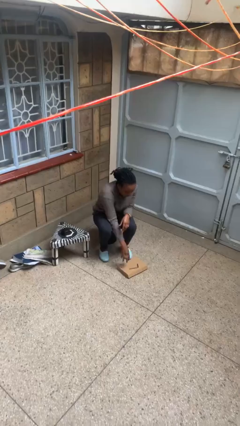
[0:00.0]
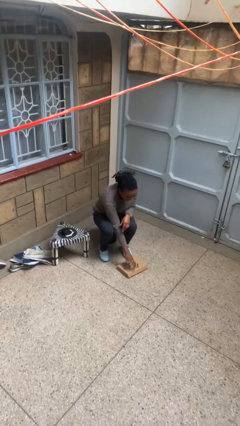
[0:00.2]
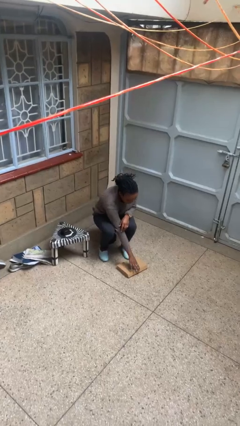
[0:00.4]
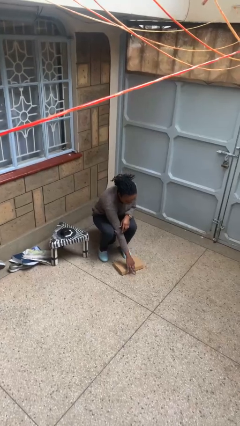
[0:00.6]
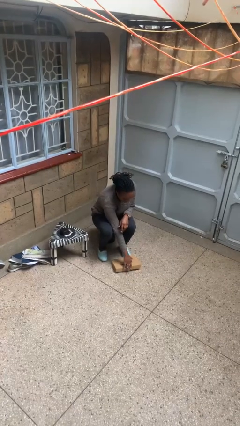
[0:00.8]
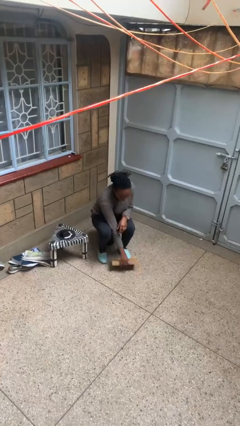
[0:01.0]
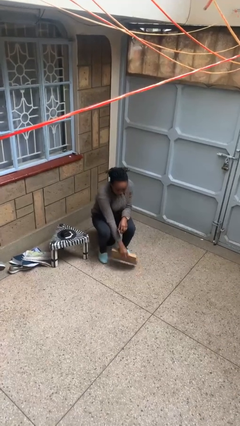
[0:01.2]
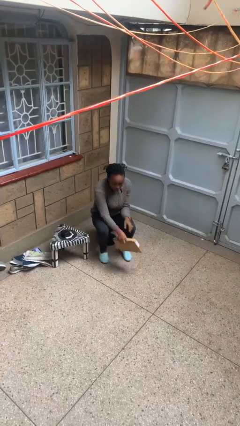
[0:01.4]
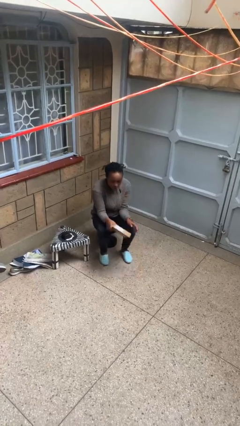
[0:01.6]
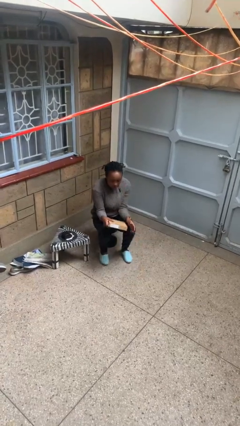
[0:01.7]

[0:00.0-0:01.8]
person picks up object from floor

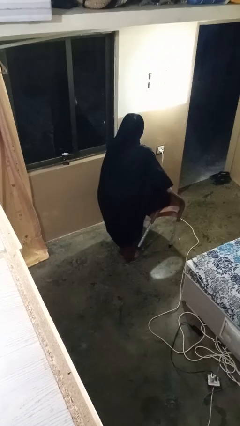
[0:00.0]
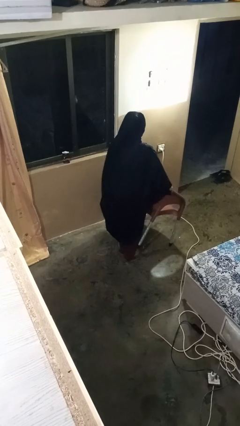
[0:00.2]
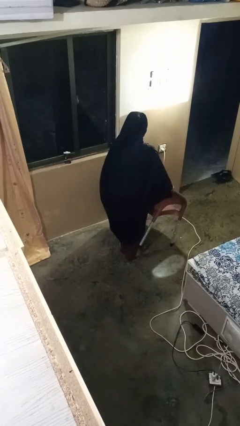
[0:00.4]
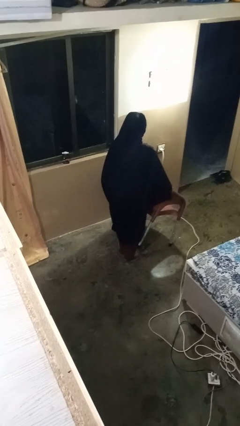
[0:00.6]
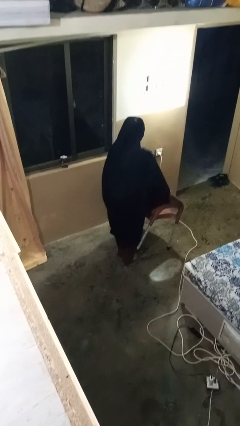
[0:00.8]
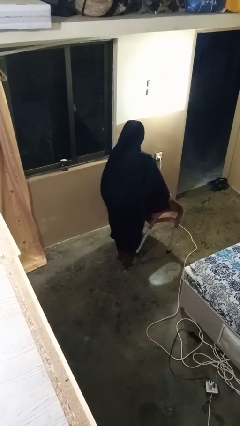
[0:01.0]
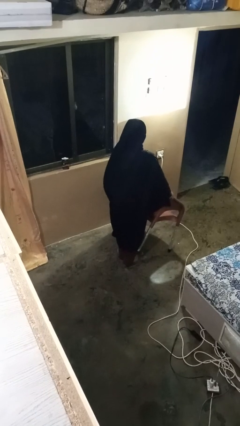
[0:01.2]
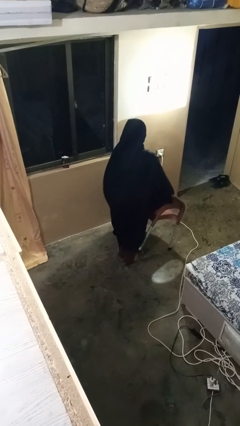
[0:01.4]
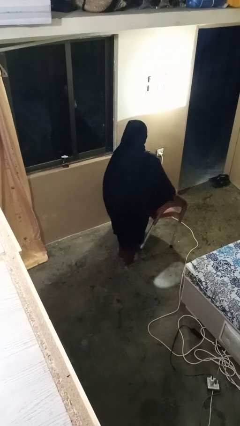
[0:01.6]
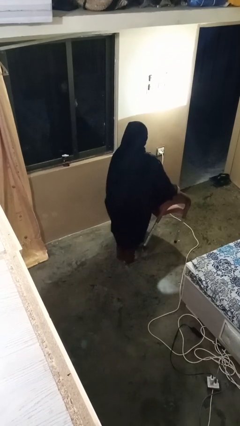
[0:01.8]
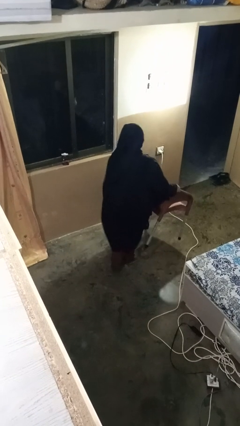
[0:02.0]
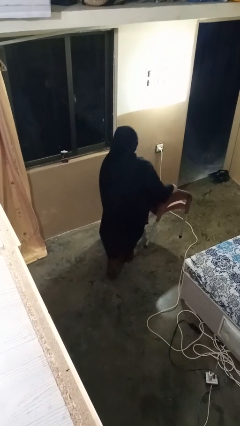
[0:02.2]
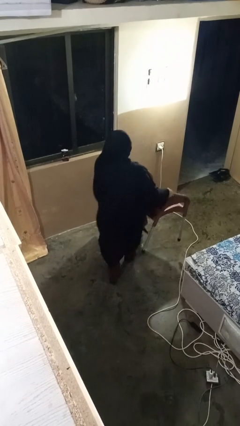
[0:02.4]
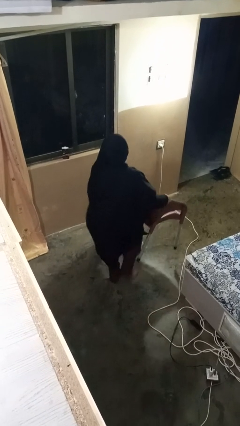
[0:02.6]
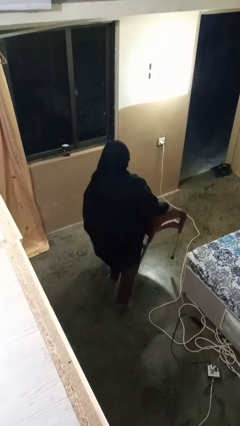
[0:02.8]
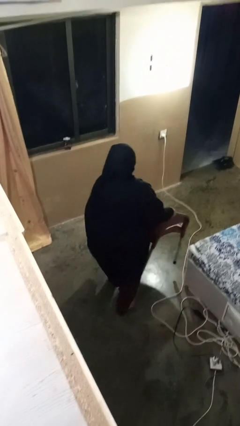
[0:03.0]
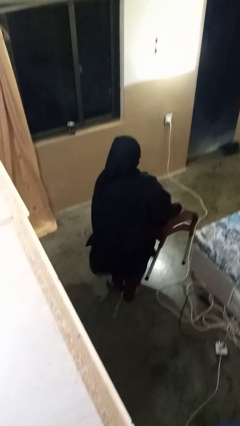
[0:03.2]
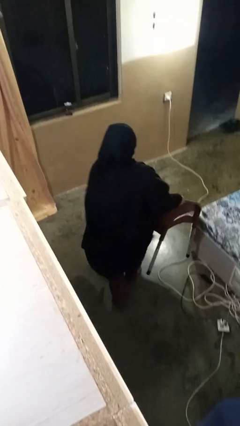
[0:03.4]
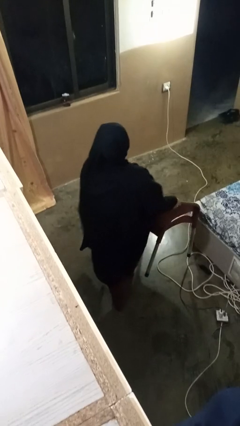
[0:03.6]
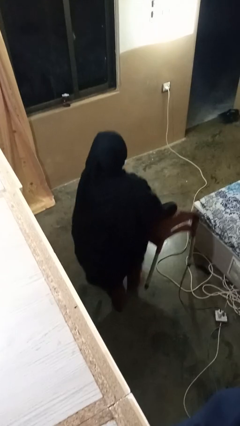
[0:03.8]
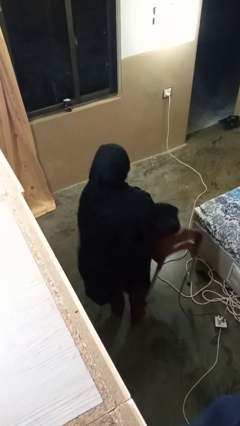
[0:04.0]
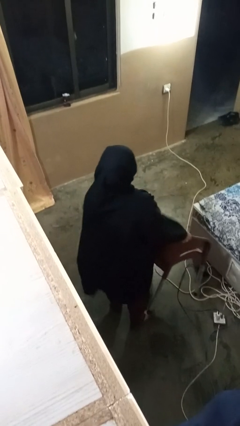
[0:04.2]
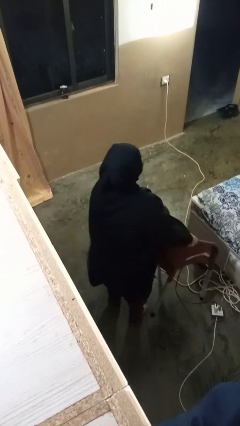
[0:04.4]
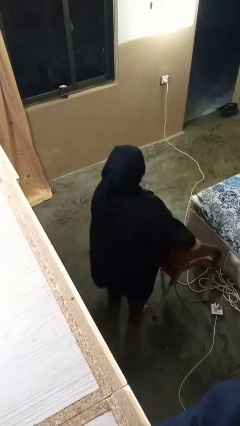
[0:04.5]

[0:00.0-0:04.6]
person carries furniture

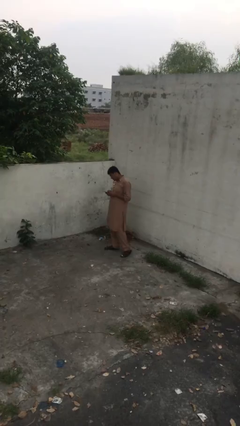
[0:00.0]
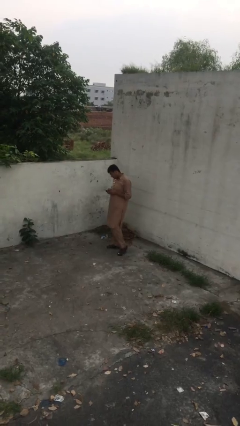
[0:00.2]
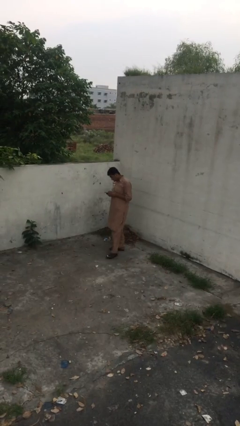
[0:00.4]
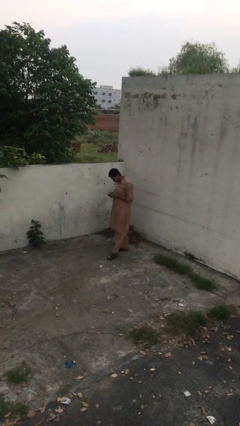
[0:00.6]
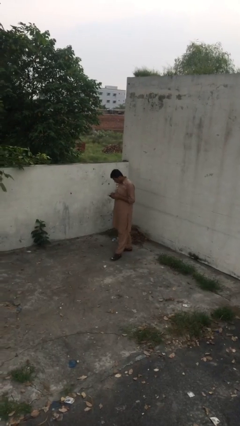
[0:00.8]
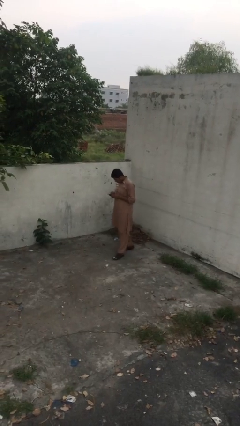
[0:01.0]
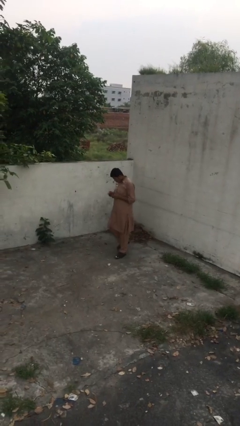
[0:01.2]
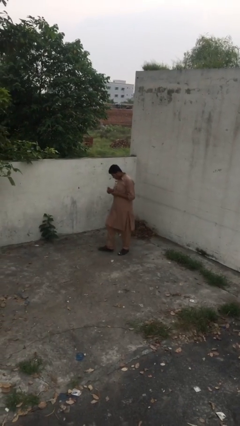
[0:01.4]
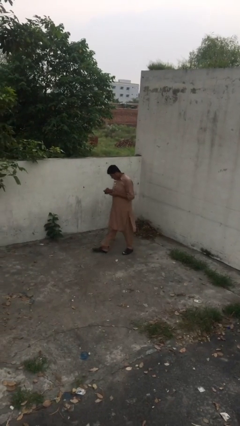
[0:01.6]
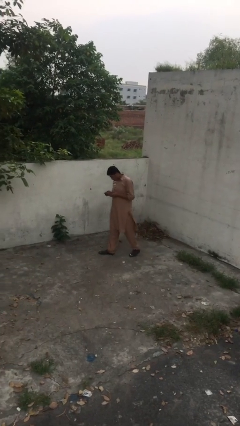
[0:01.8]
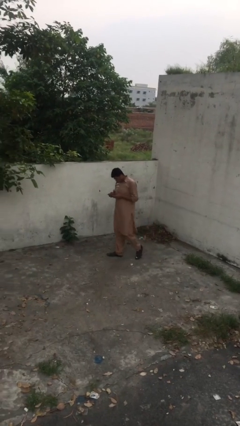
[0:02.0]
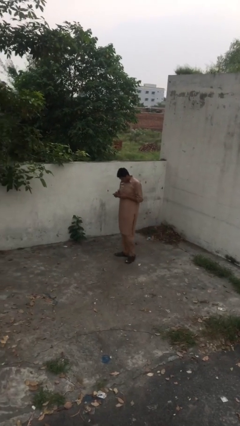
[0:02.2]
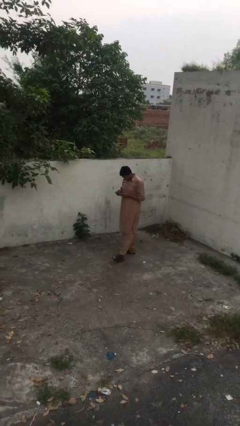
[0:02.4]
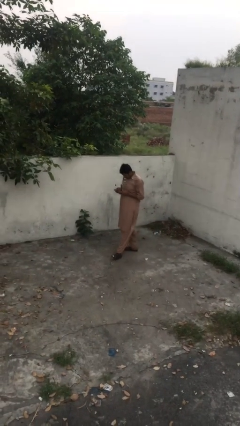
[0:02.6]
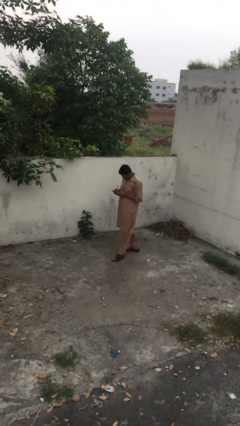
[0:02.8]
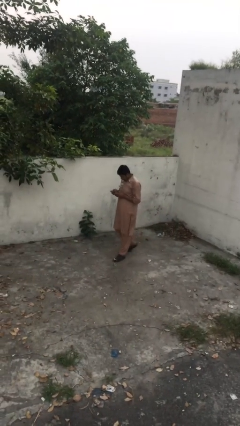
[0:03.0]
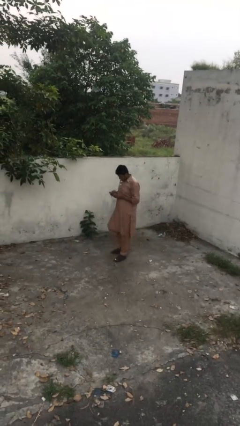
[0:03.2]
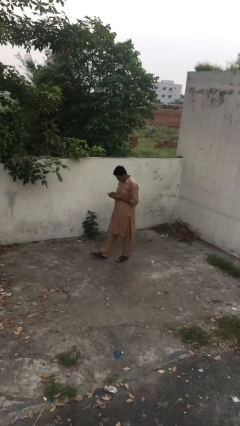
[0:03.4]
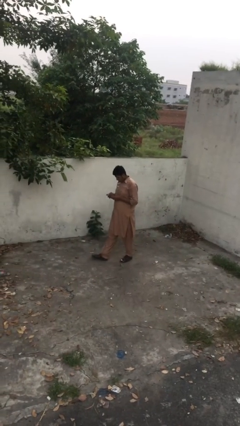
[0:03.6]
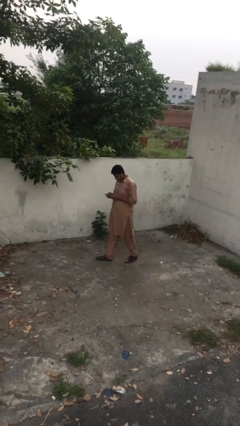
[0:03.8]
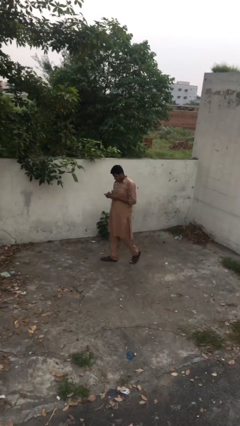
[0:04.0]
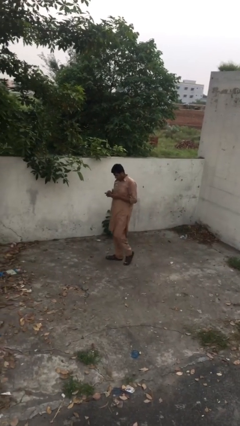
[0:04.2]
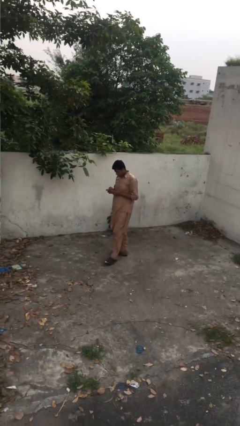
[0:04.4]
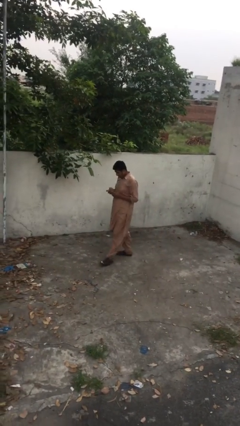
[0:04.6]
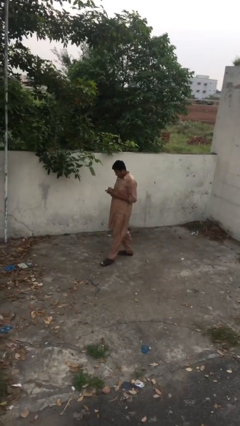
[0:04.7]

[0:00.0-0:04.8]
person texts on phone

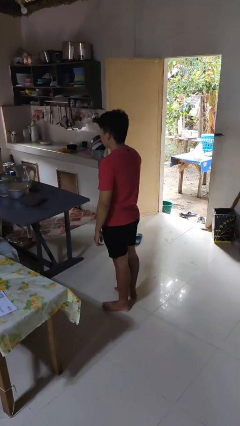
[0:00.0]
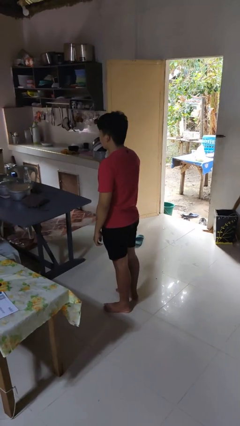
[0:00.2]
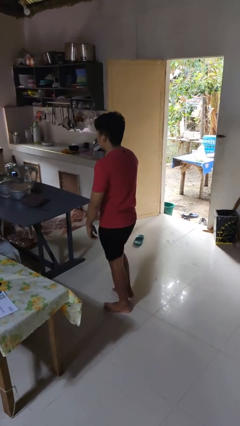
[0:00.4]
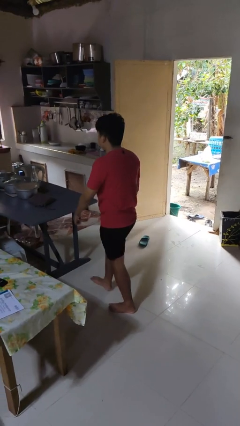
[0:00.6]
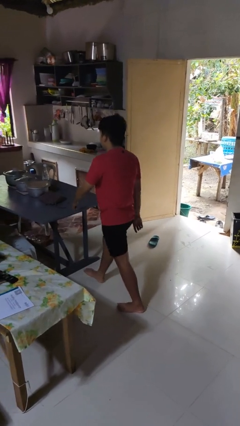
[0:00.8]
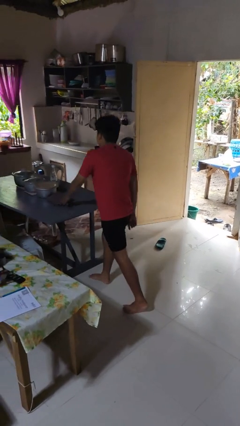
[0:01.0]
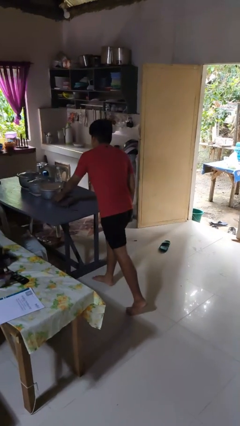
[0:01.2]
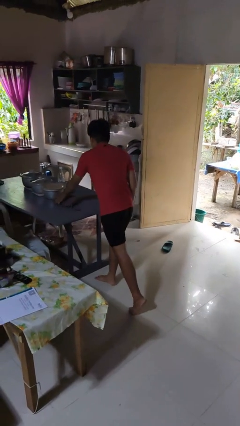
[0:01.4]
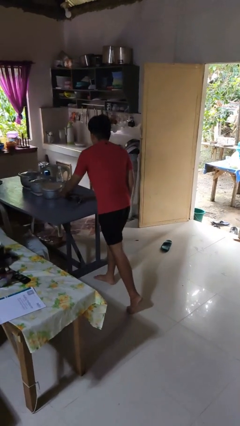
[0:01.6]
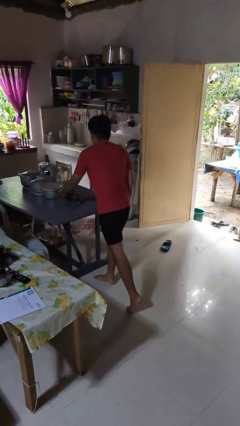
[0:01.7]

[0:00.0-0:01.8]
person picks up object from table

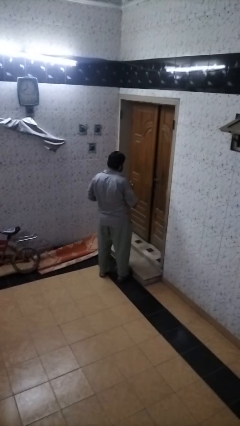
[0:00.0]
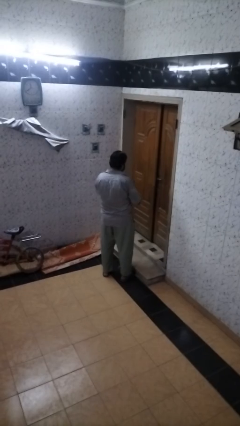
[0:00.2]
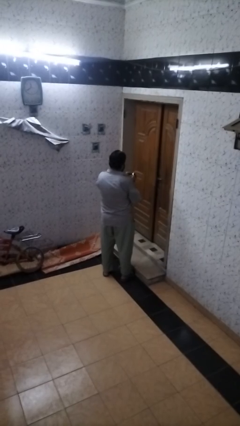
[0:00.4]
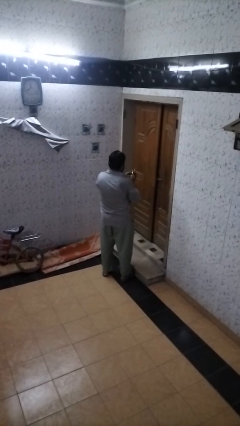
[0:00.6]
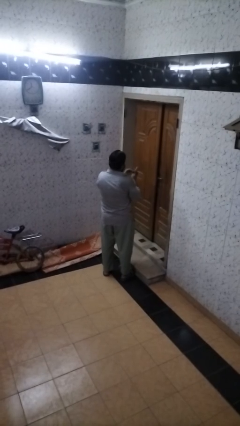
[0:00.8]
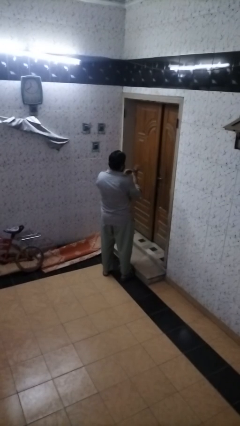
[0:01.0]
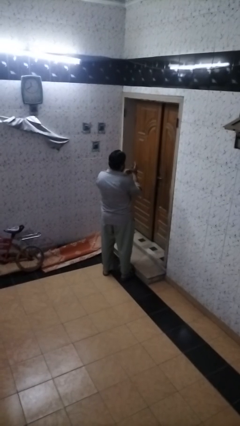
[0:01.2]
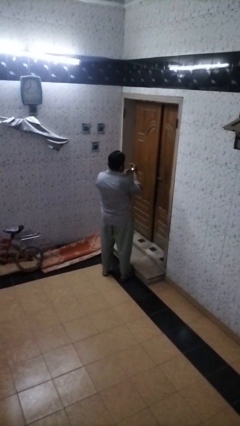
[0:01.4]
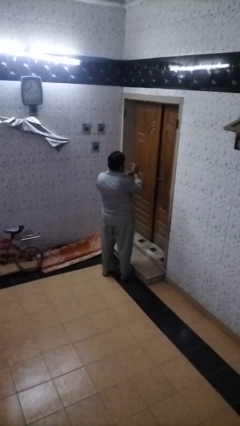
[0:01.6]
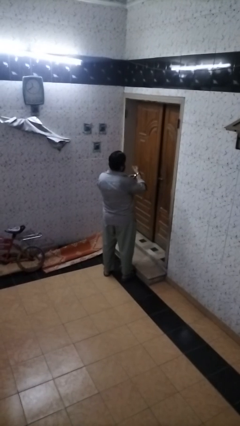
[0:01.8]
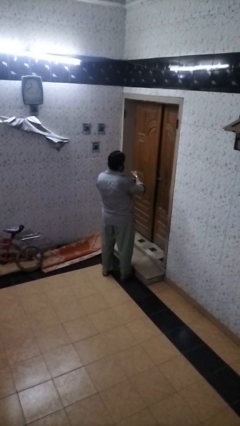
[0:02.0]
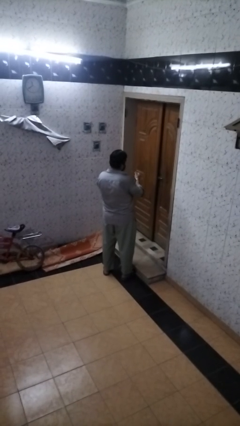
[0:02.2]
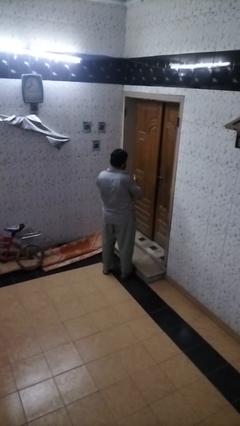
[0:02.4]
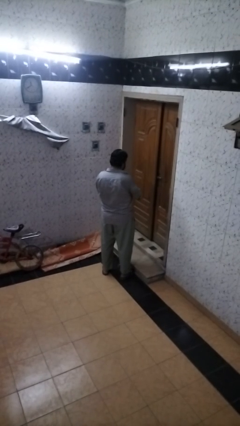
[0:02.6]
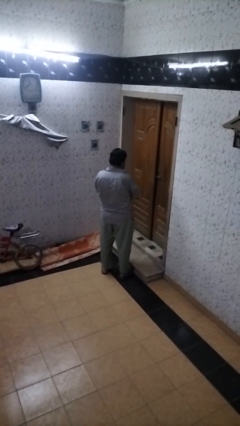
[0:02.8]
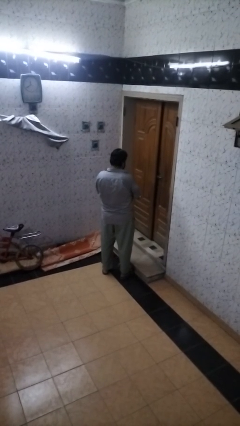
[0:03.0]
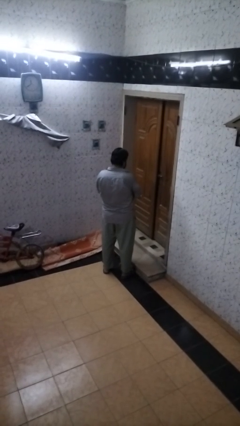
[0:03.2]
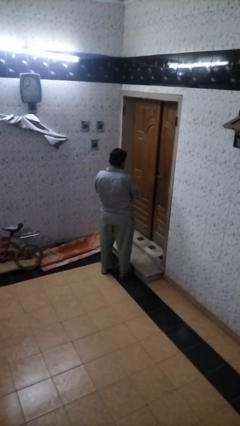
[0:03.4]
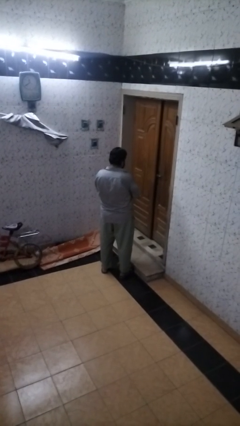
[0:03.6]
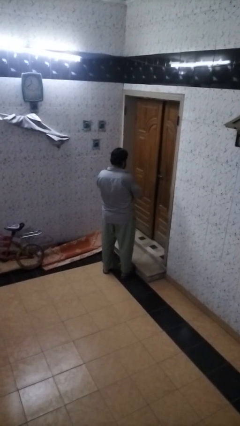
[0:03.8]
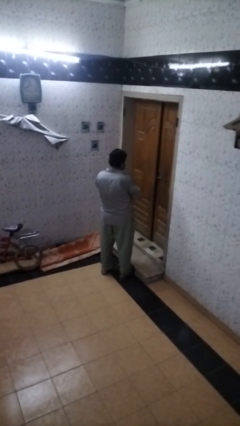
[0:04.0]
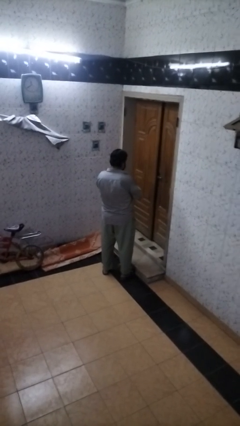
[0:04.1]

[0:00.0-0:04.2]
person puts on wristwatch

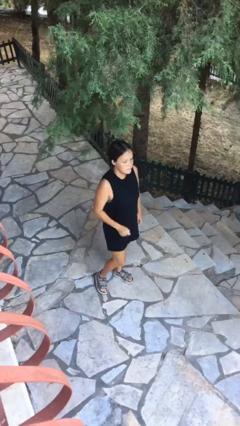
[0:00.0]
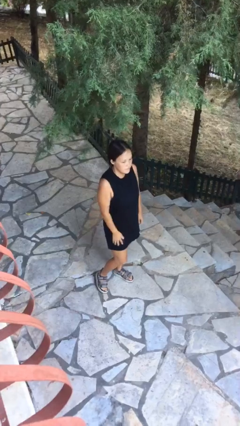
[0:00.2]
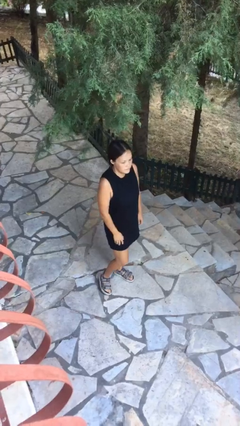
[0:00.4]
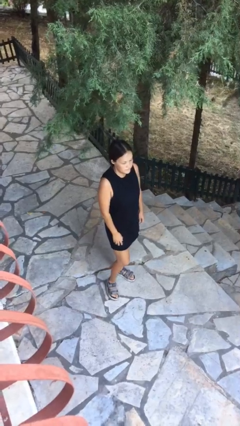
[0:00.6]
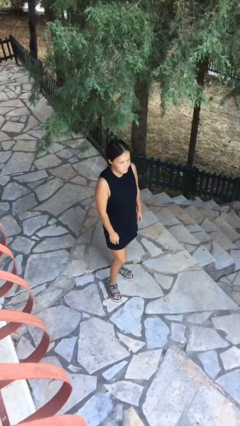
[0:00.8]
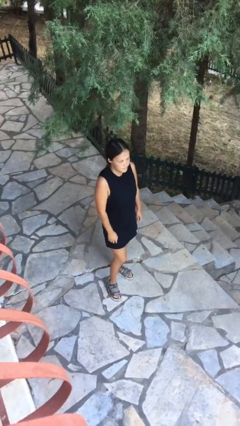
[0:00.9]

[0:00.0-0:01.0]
person gestures lower hand
